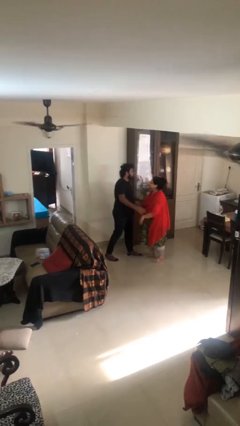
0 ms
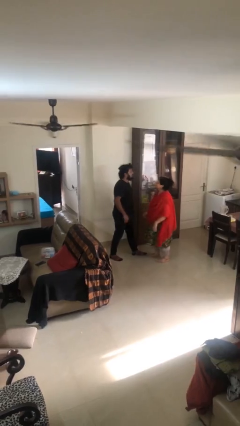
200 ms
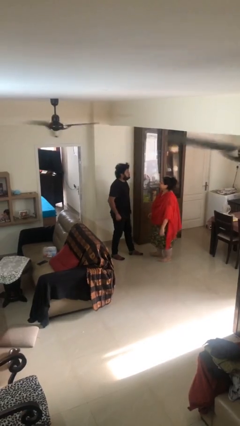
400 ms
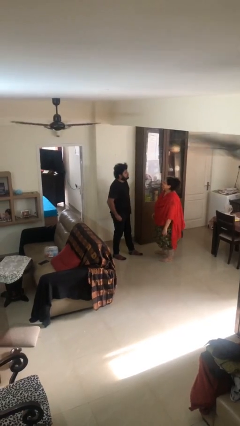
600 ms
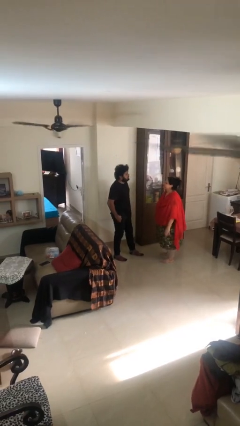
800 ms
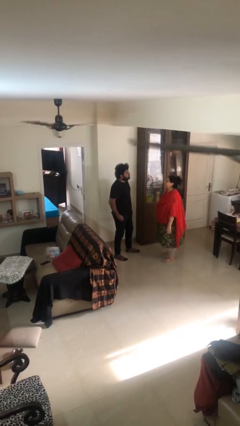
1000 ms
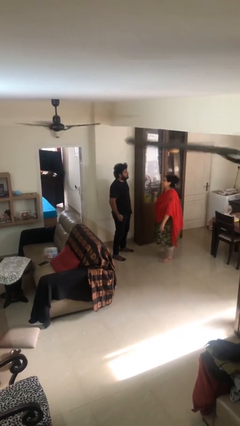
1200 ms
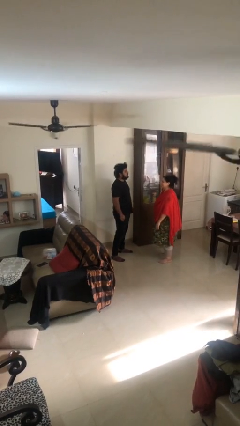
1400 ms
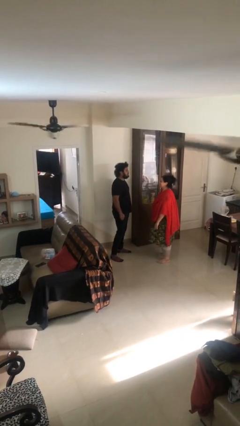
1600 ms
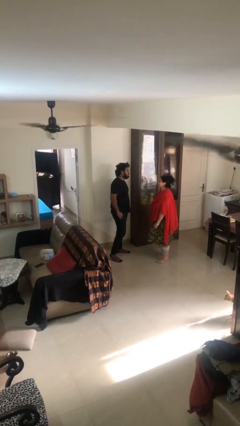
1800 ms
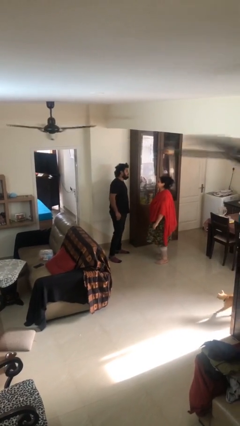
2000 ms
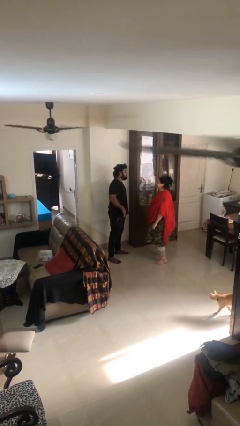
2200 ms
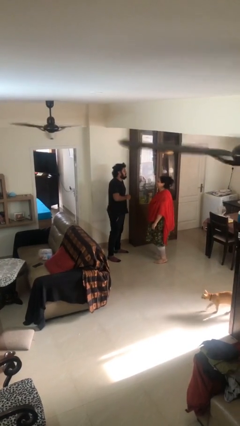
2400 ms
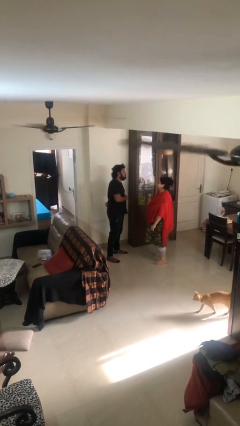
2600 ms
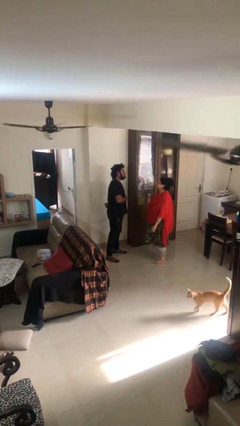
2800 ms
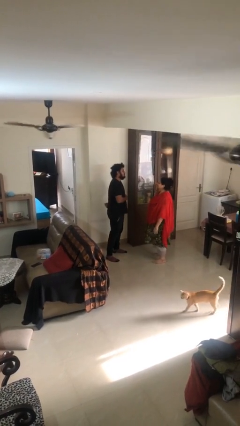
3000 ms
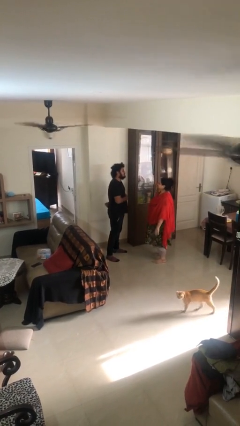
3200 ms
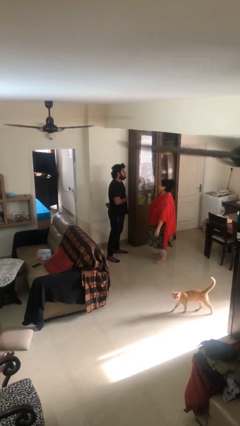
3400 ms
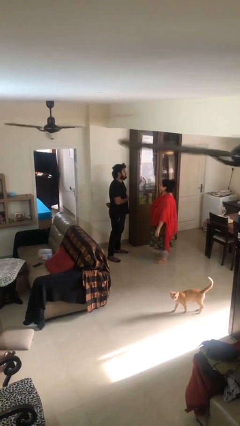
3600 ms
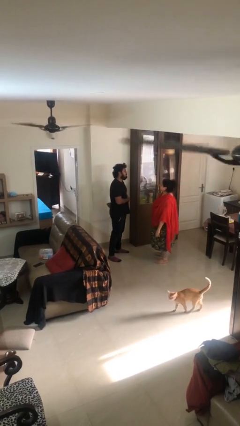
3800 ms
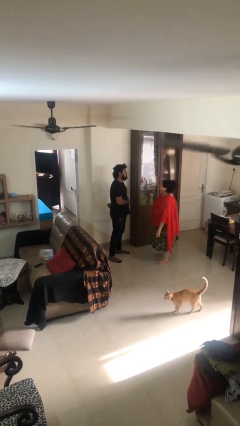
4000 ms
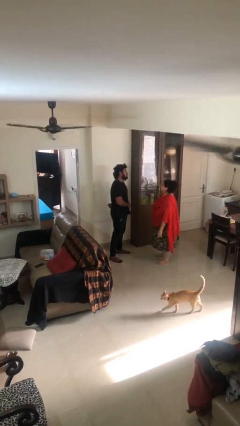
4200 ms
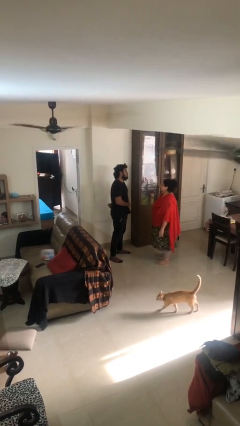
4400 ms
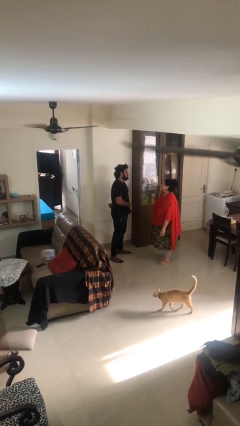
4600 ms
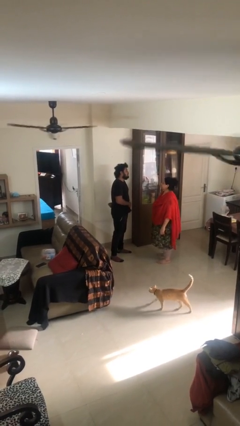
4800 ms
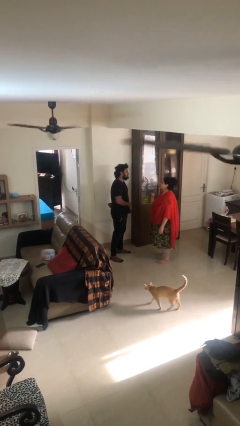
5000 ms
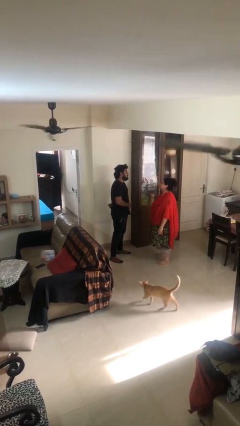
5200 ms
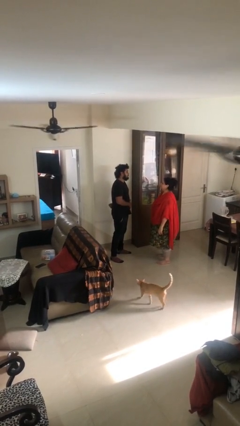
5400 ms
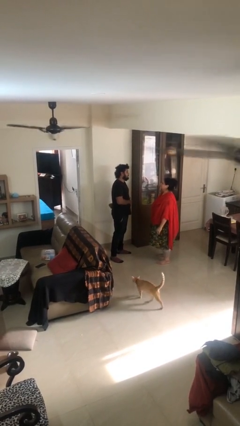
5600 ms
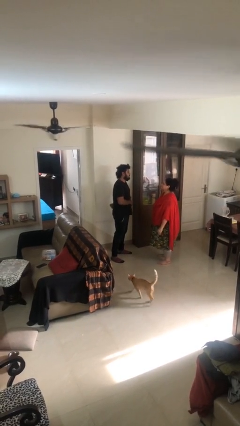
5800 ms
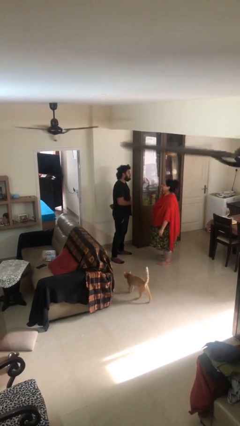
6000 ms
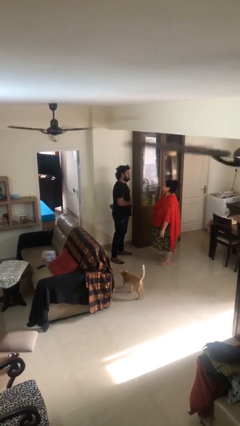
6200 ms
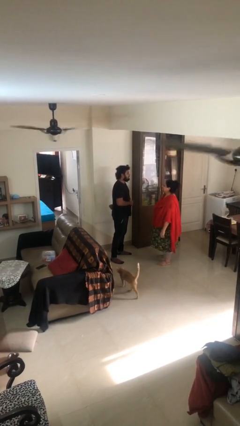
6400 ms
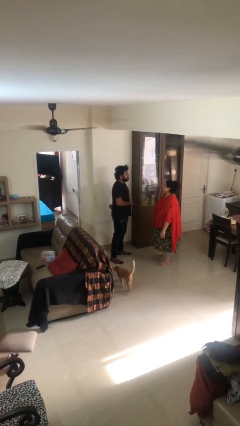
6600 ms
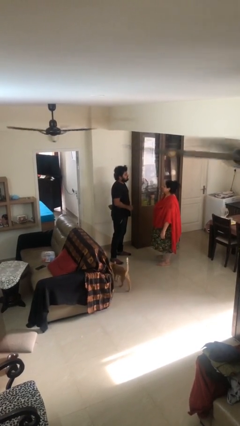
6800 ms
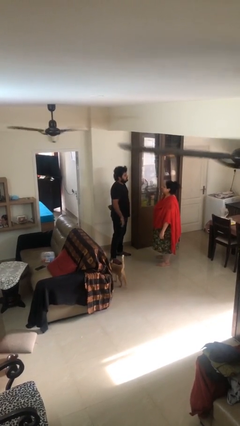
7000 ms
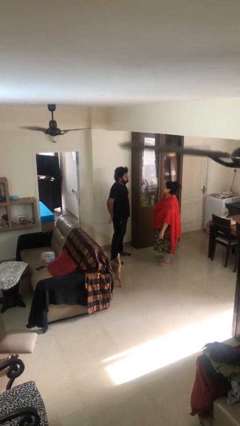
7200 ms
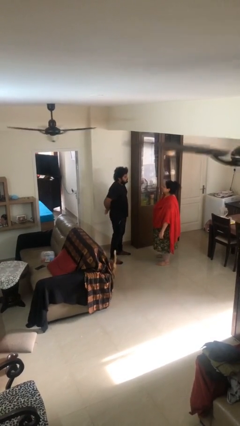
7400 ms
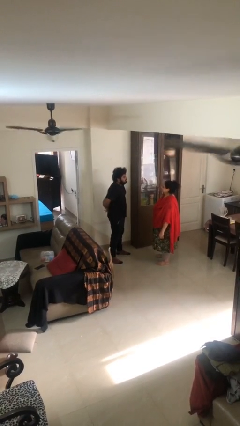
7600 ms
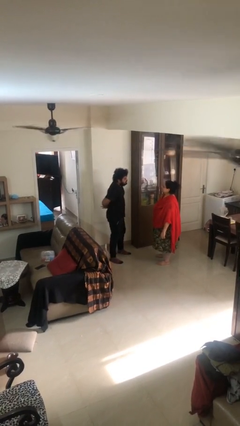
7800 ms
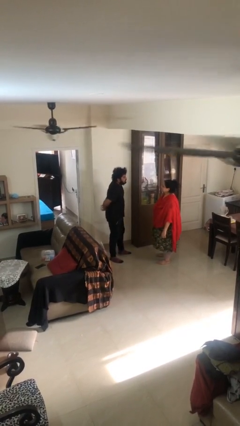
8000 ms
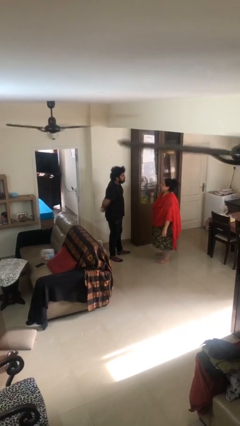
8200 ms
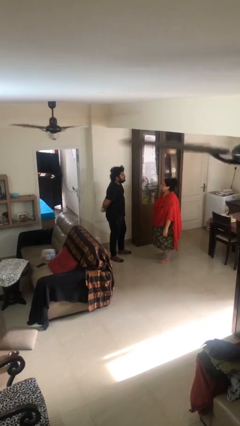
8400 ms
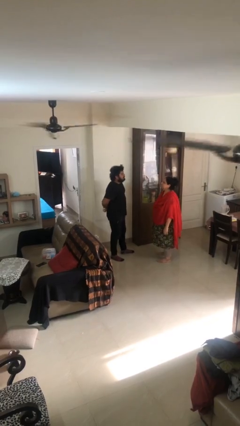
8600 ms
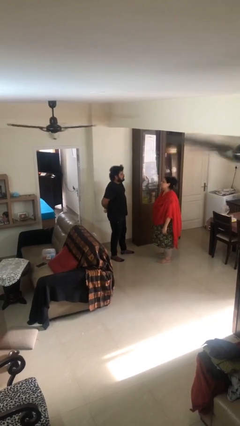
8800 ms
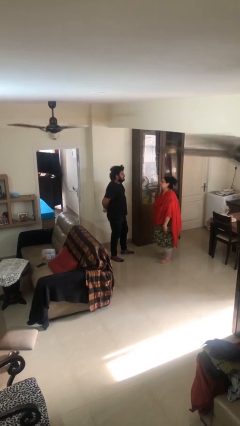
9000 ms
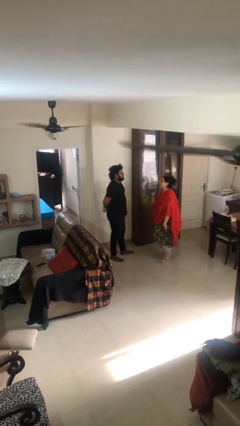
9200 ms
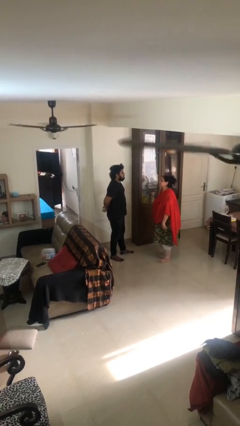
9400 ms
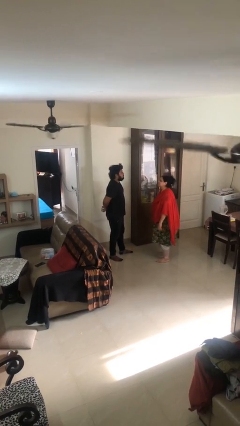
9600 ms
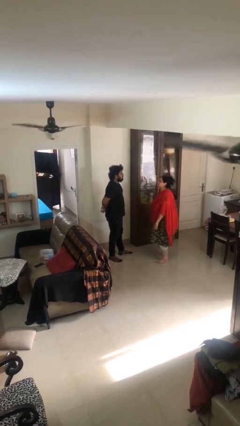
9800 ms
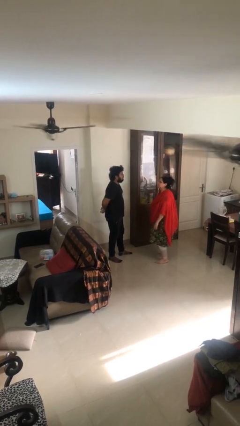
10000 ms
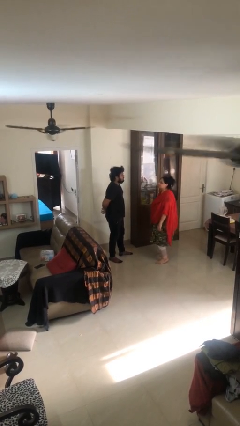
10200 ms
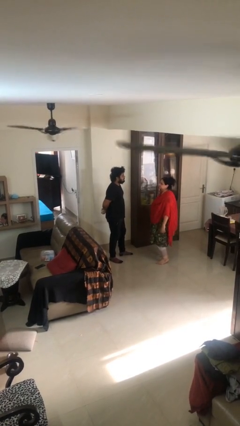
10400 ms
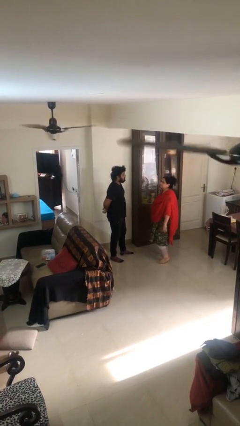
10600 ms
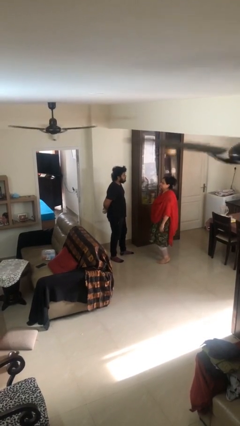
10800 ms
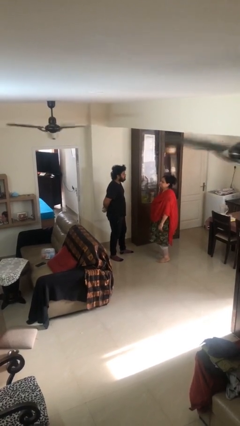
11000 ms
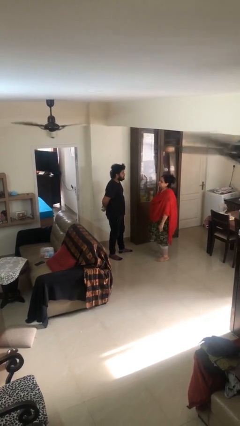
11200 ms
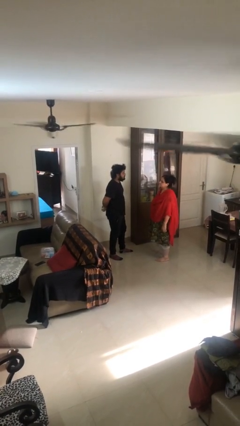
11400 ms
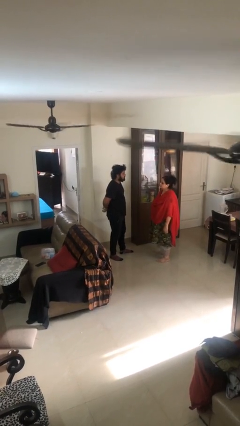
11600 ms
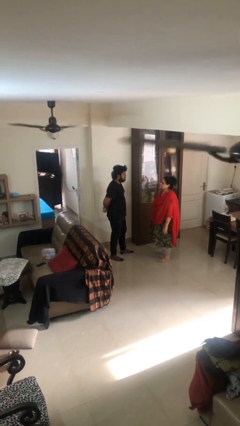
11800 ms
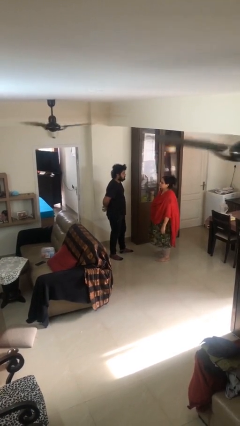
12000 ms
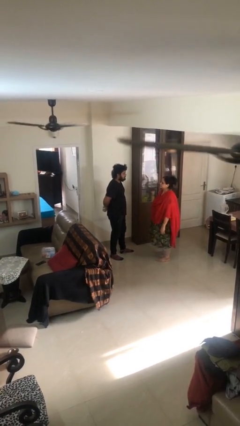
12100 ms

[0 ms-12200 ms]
person talks to person

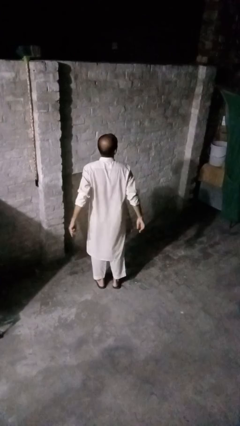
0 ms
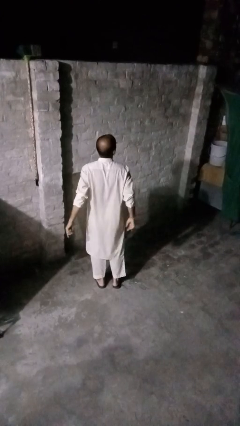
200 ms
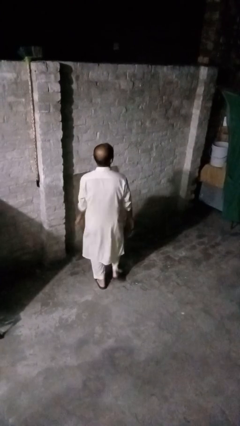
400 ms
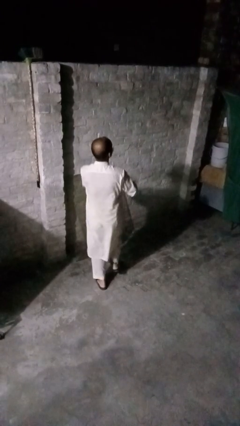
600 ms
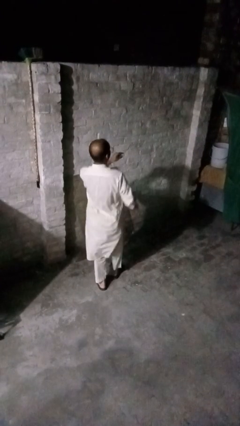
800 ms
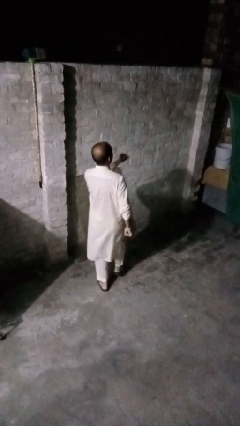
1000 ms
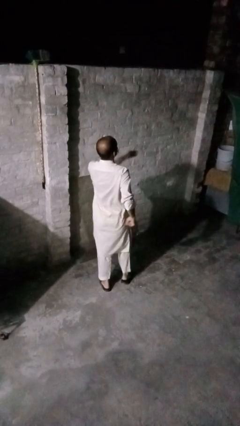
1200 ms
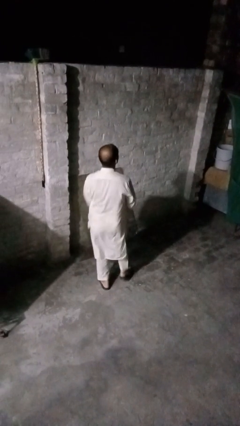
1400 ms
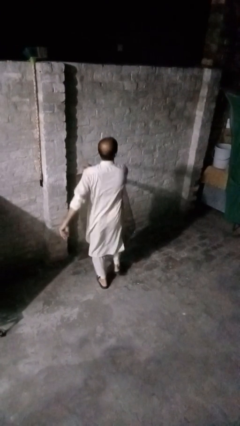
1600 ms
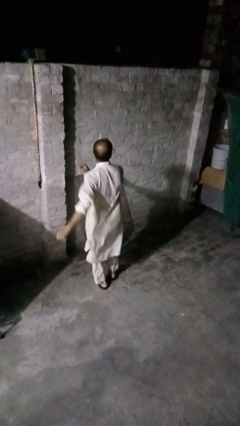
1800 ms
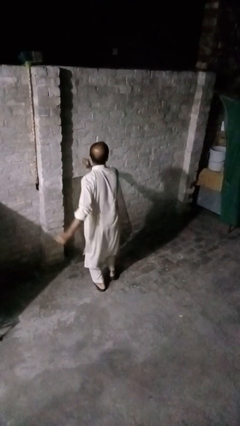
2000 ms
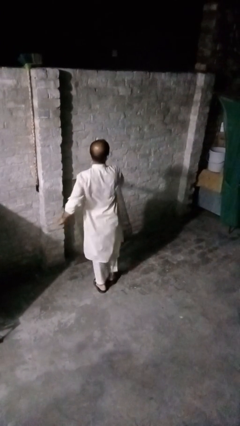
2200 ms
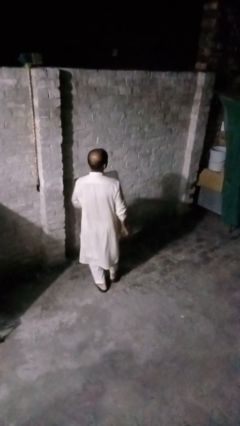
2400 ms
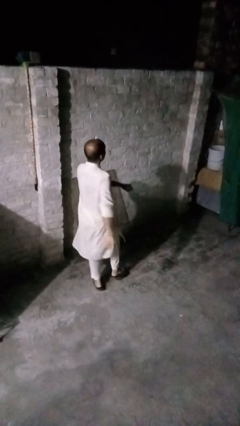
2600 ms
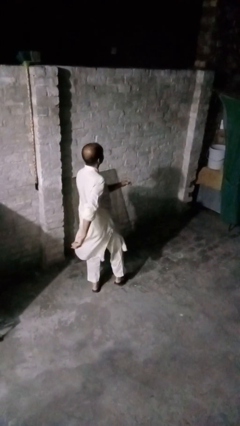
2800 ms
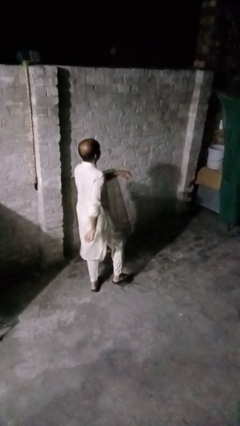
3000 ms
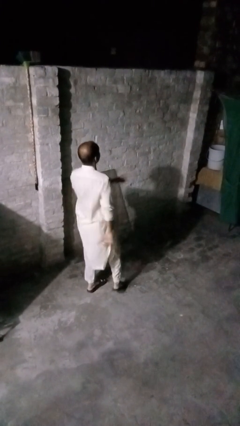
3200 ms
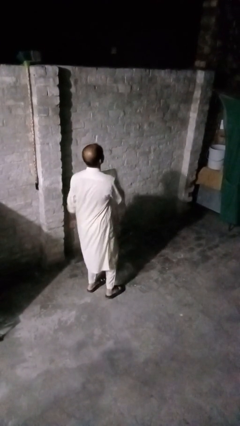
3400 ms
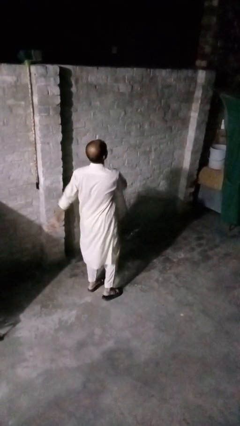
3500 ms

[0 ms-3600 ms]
person dances in place

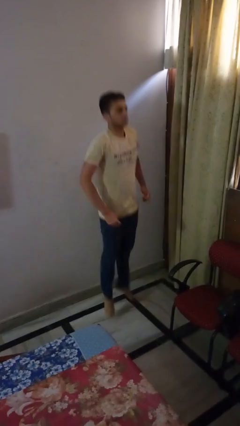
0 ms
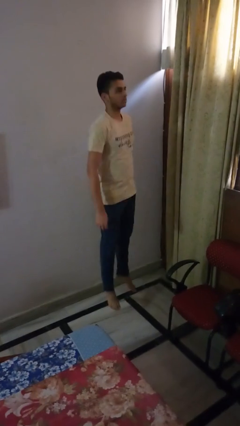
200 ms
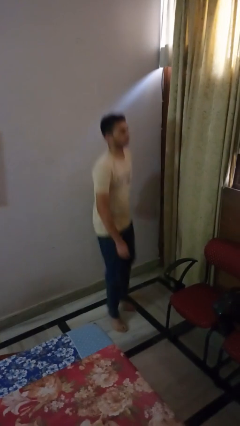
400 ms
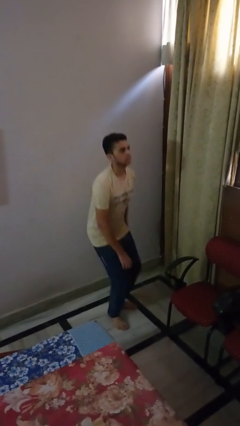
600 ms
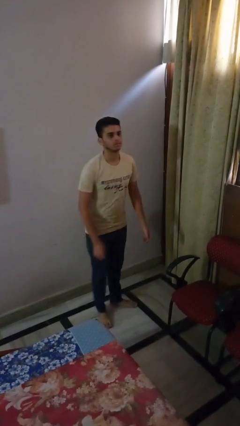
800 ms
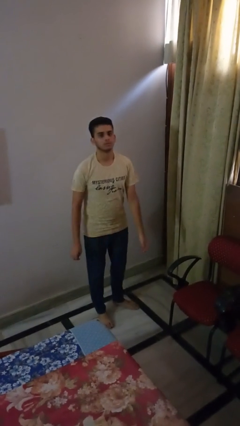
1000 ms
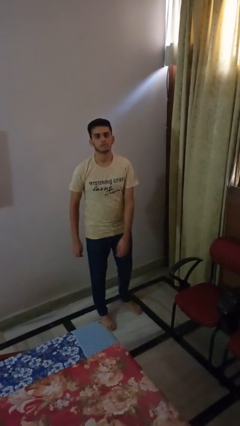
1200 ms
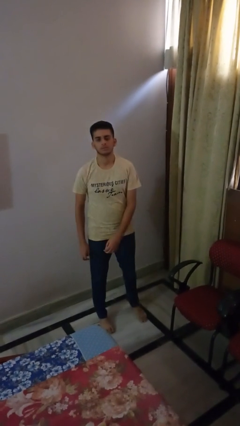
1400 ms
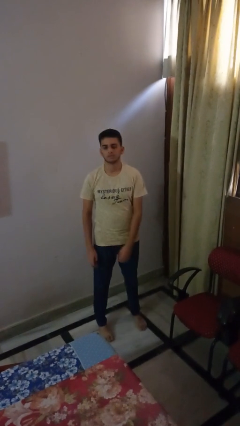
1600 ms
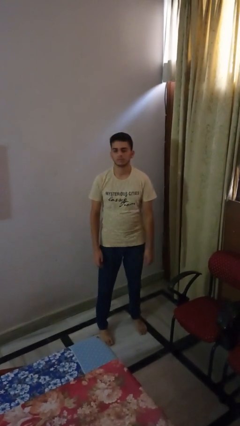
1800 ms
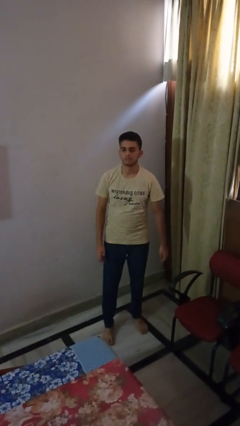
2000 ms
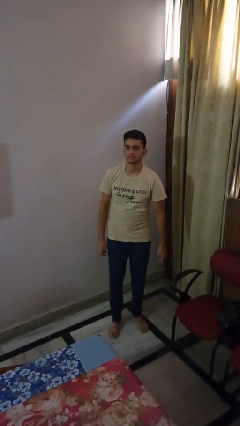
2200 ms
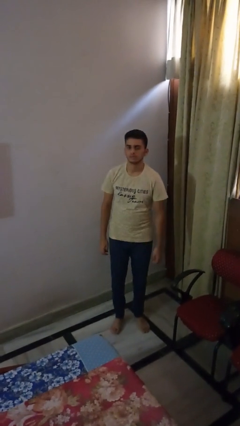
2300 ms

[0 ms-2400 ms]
person jumps

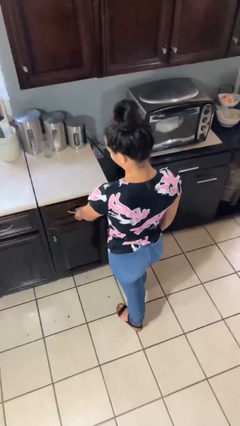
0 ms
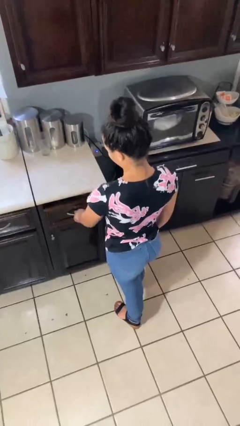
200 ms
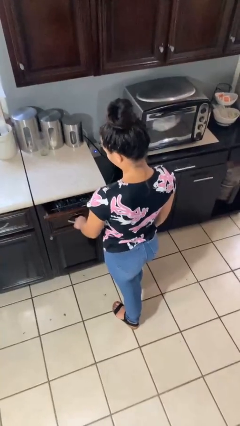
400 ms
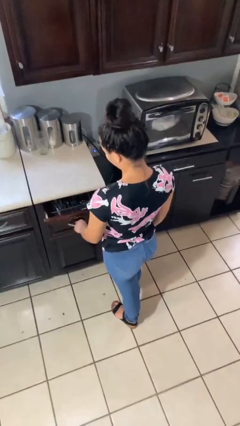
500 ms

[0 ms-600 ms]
person opens kitchen drawer
